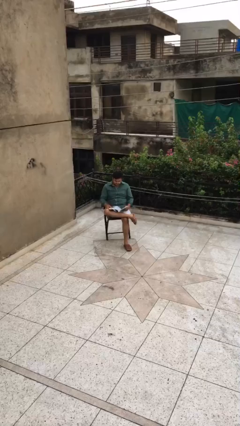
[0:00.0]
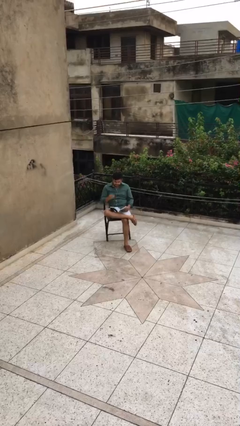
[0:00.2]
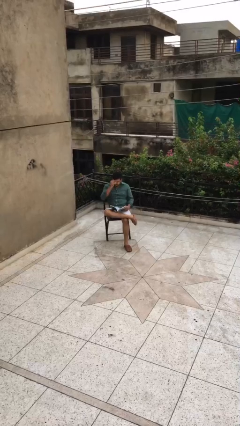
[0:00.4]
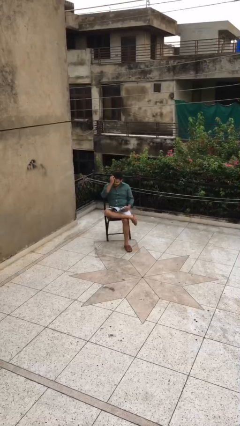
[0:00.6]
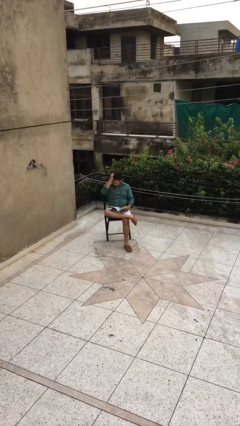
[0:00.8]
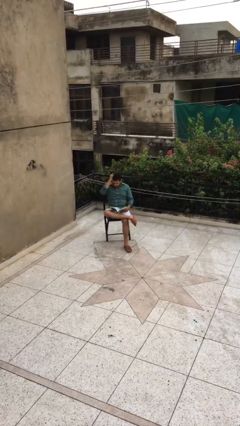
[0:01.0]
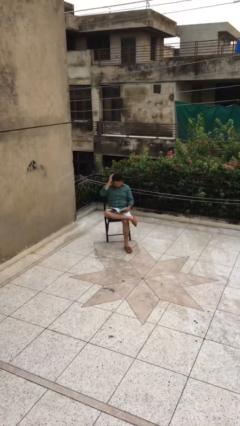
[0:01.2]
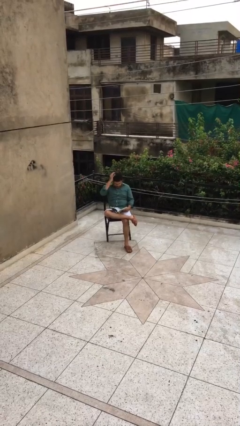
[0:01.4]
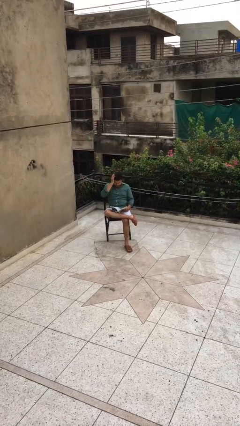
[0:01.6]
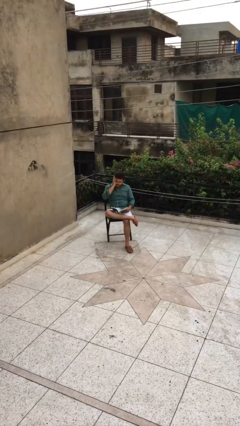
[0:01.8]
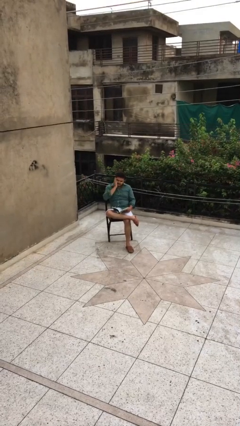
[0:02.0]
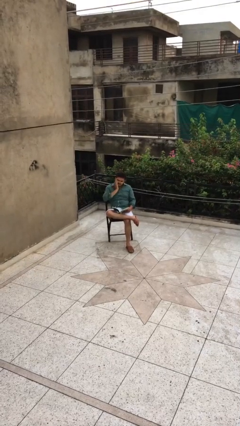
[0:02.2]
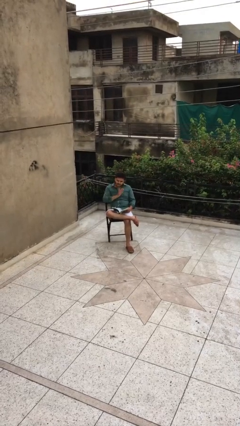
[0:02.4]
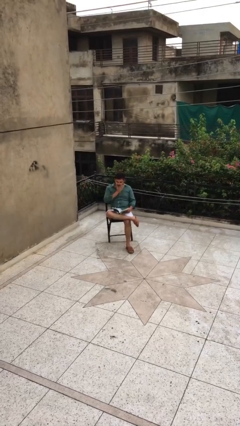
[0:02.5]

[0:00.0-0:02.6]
person reads document

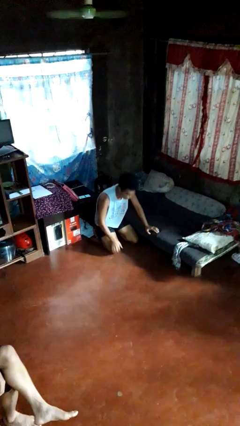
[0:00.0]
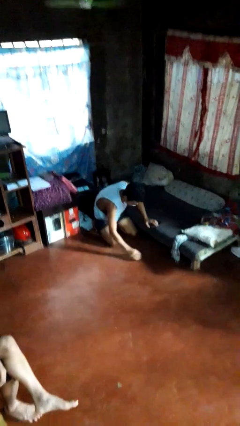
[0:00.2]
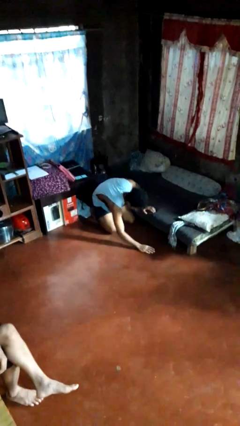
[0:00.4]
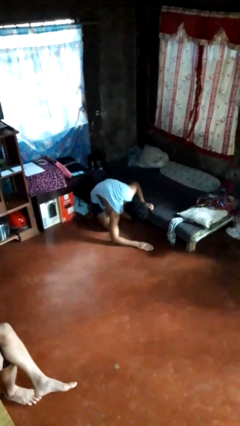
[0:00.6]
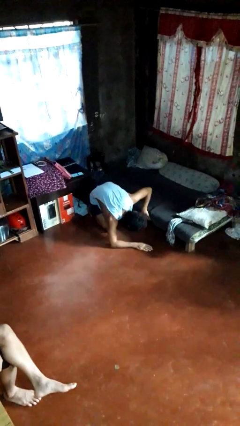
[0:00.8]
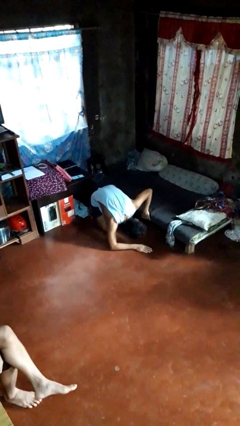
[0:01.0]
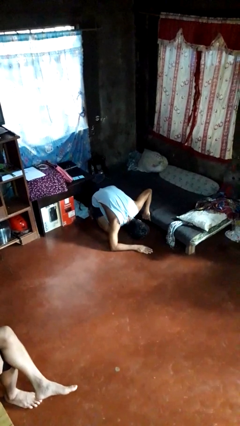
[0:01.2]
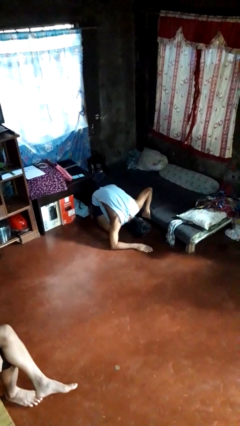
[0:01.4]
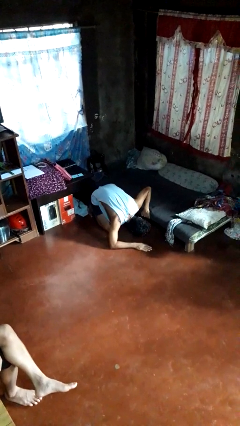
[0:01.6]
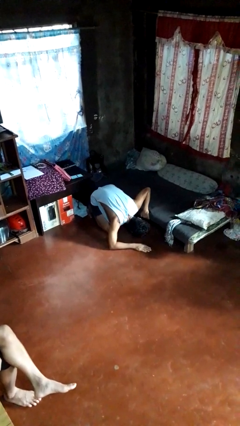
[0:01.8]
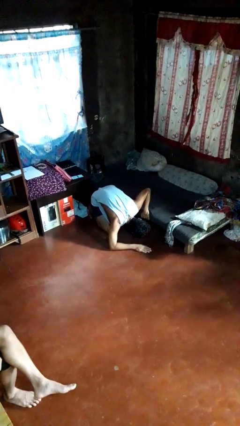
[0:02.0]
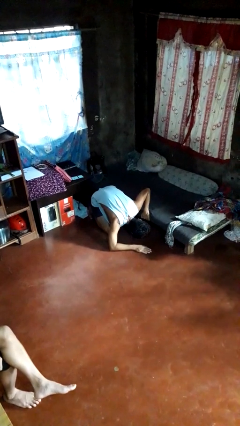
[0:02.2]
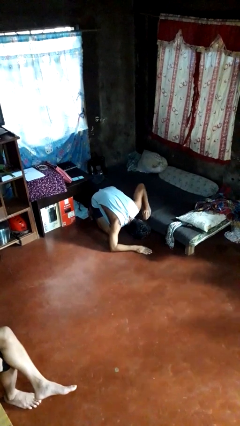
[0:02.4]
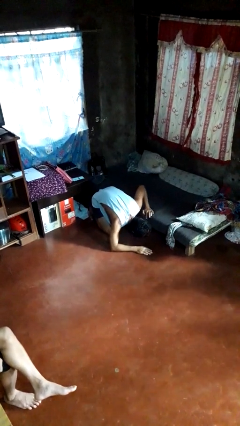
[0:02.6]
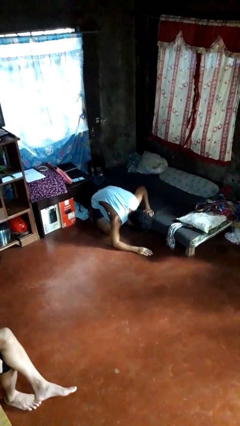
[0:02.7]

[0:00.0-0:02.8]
person searches under bed

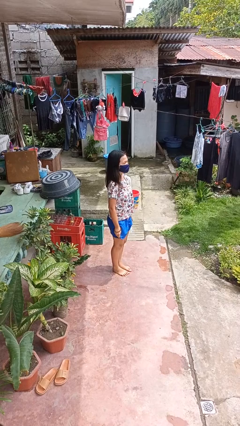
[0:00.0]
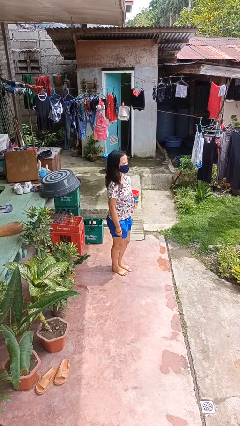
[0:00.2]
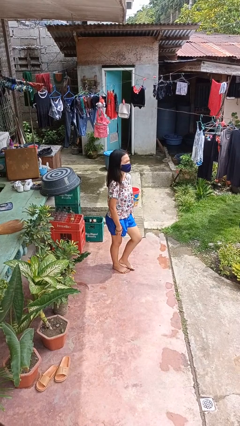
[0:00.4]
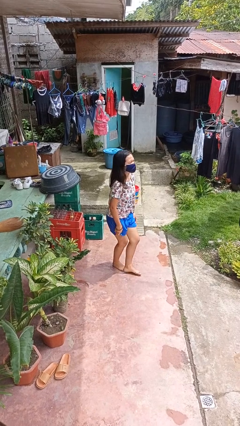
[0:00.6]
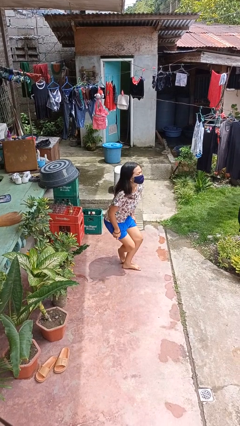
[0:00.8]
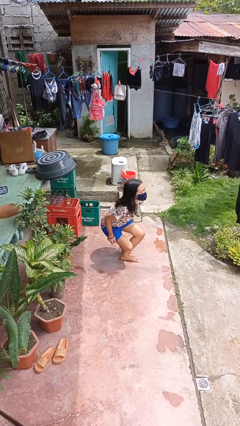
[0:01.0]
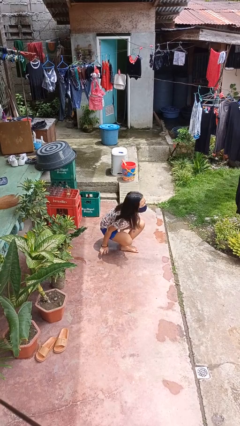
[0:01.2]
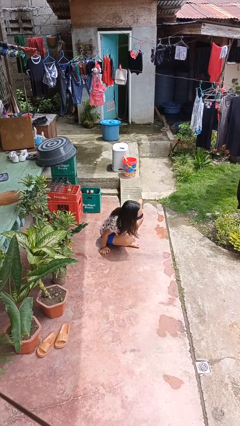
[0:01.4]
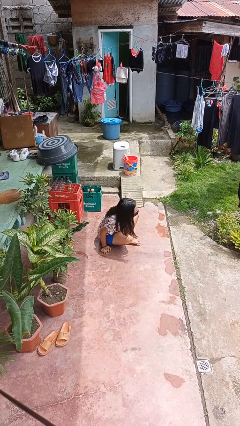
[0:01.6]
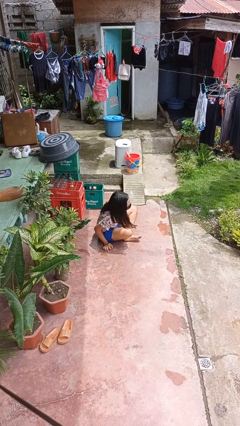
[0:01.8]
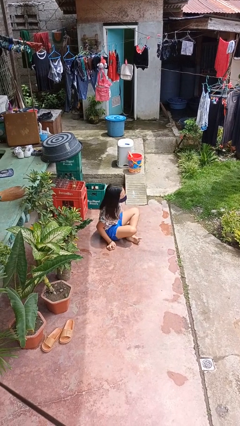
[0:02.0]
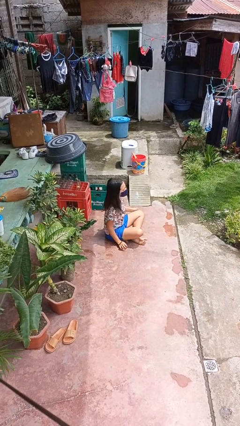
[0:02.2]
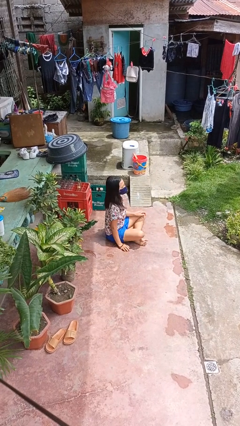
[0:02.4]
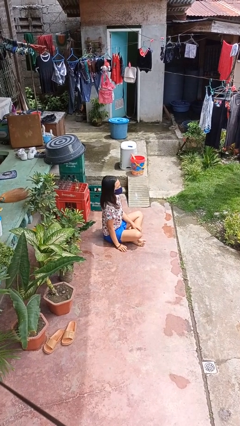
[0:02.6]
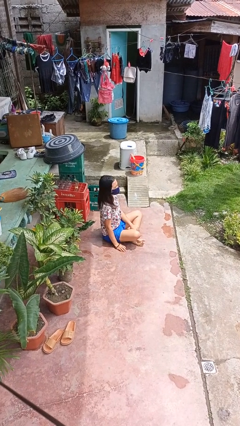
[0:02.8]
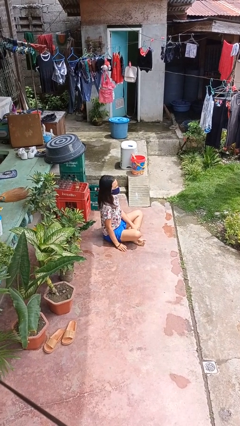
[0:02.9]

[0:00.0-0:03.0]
person sits crisscross

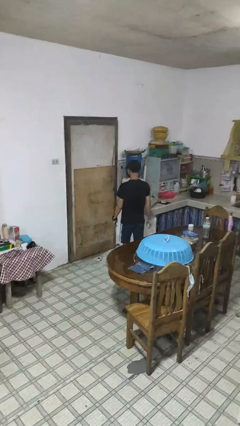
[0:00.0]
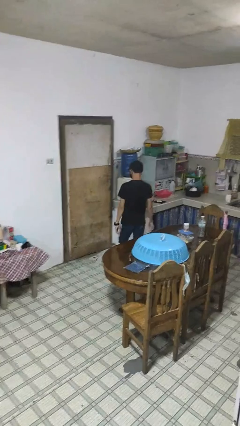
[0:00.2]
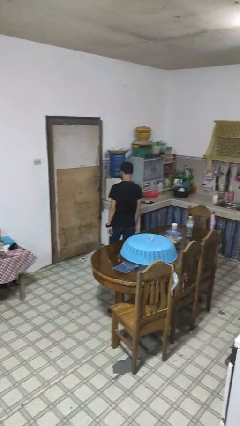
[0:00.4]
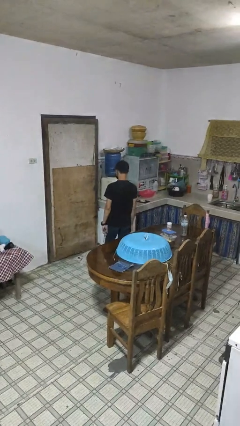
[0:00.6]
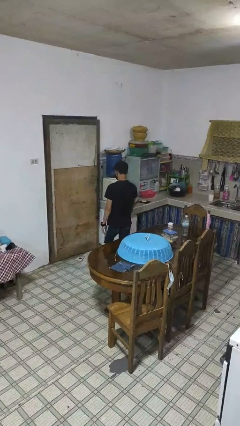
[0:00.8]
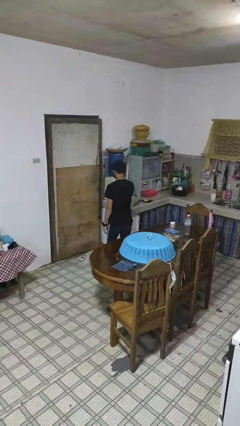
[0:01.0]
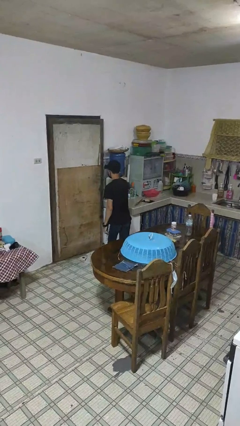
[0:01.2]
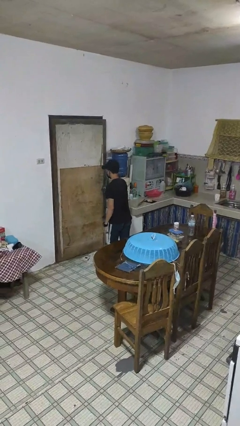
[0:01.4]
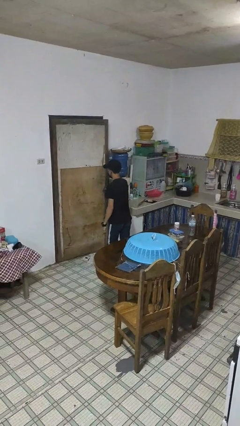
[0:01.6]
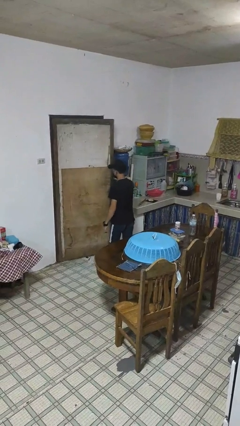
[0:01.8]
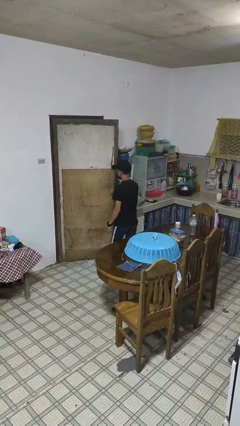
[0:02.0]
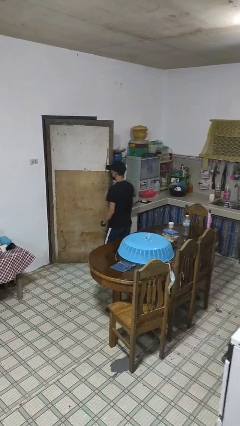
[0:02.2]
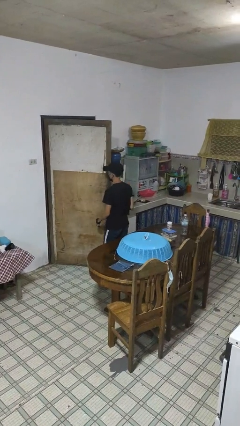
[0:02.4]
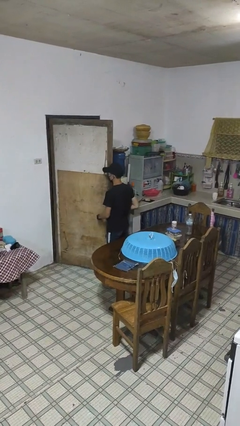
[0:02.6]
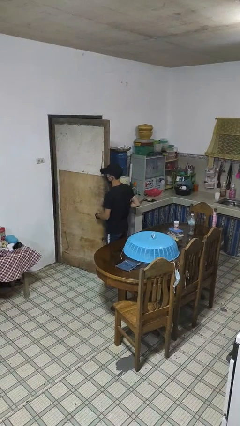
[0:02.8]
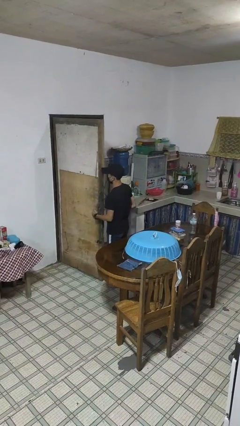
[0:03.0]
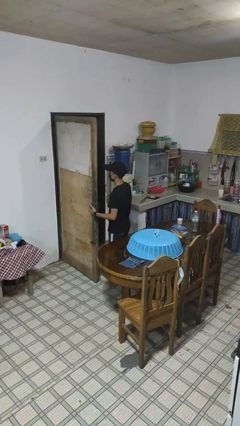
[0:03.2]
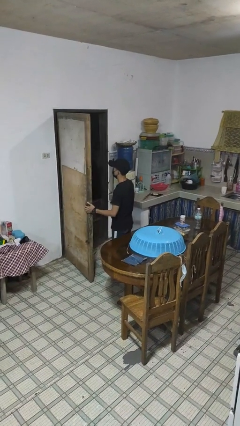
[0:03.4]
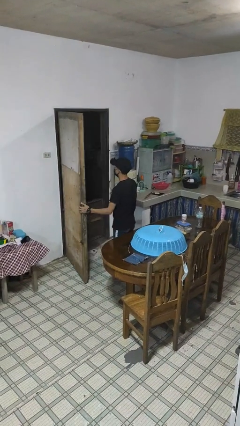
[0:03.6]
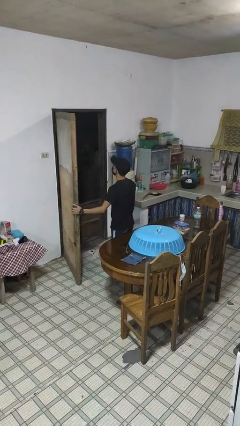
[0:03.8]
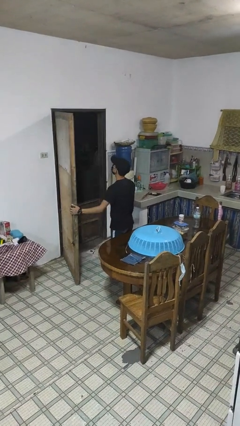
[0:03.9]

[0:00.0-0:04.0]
person opens facility door

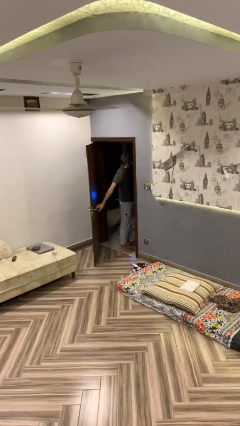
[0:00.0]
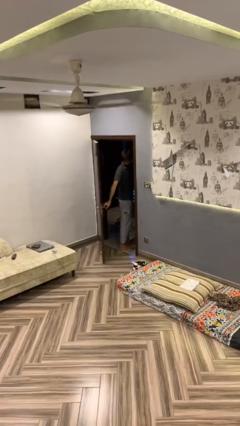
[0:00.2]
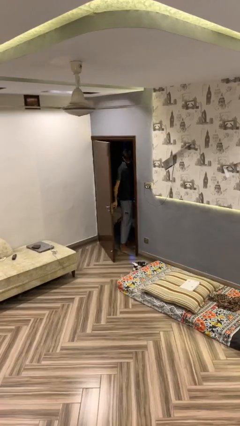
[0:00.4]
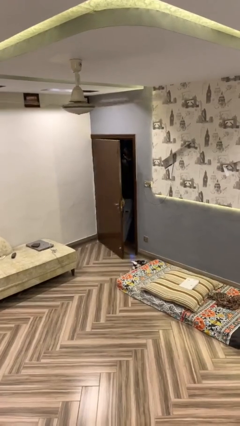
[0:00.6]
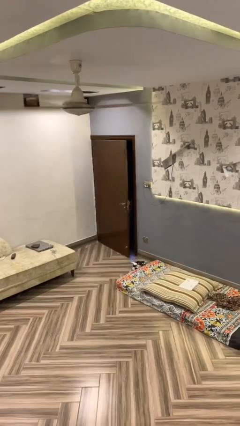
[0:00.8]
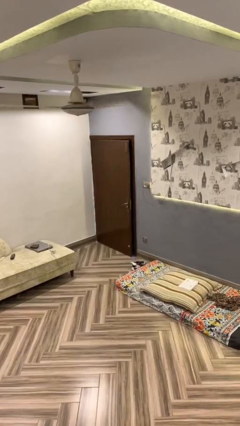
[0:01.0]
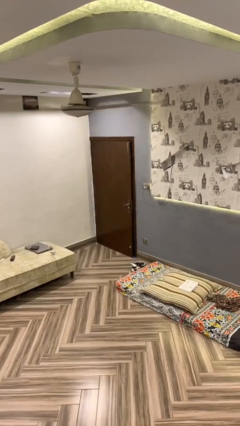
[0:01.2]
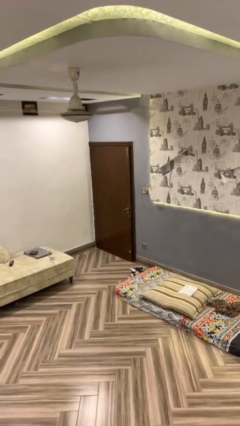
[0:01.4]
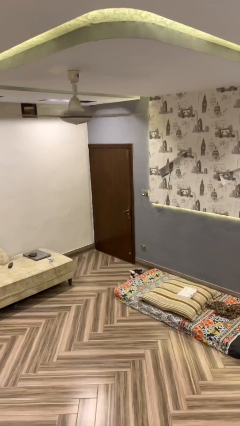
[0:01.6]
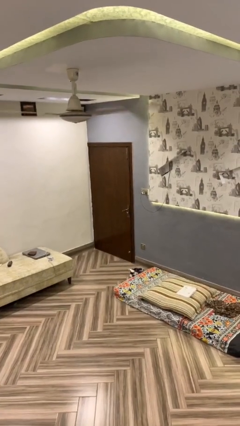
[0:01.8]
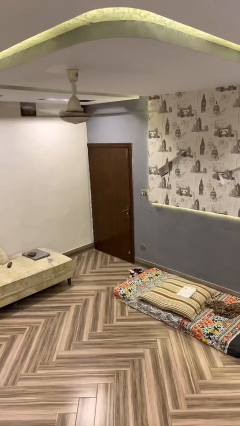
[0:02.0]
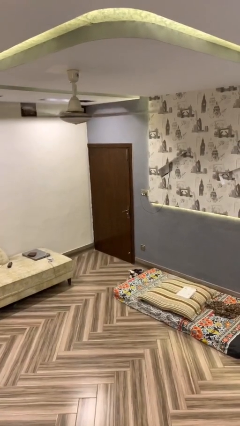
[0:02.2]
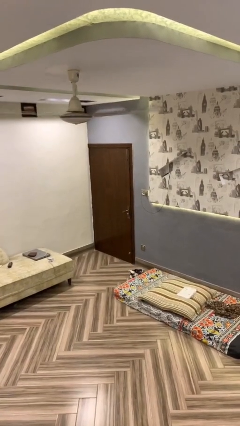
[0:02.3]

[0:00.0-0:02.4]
person closes facility door

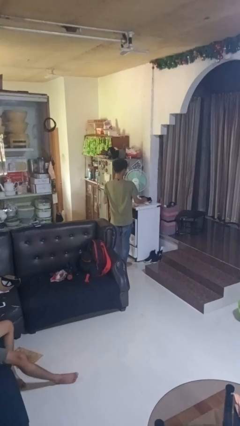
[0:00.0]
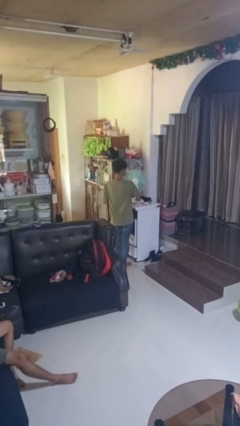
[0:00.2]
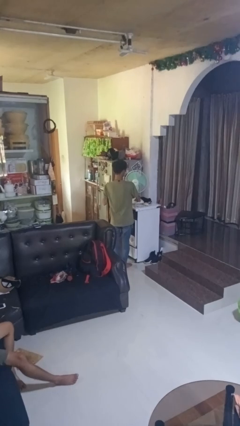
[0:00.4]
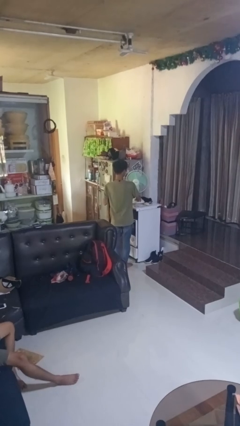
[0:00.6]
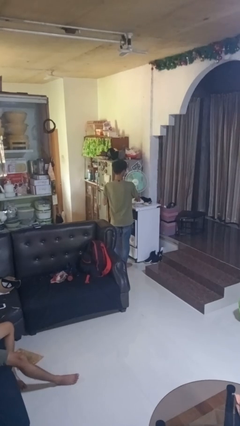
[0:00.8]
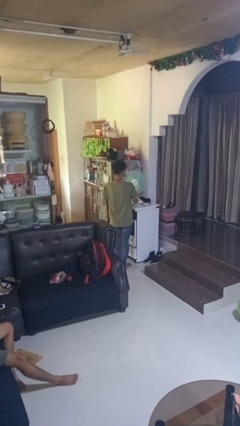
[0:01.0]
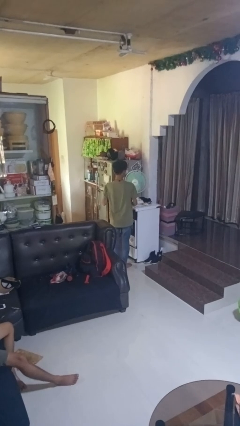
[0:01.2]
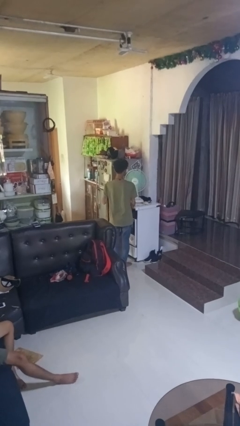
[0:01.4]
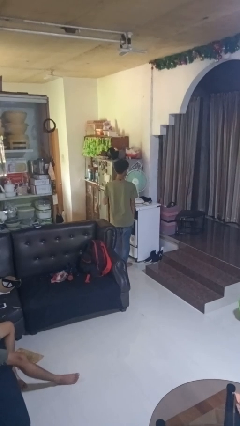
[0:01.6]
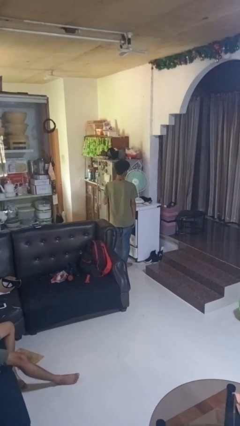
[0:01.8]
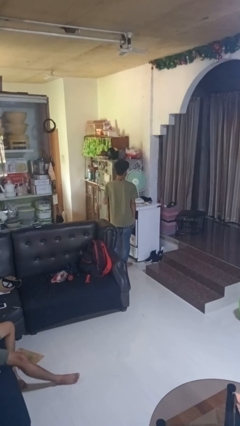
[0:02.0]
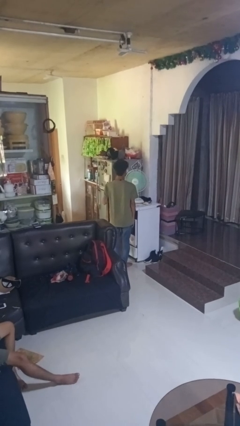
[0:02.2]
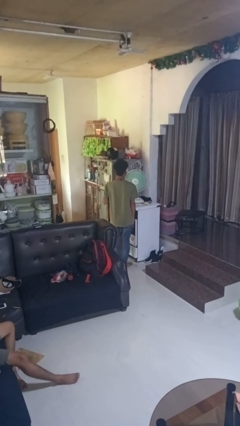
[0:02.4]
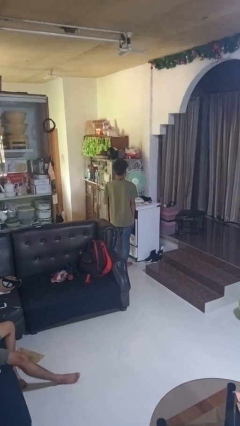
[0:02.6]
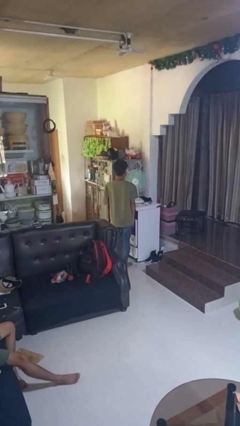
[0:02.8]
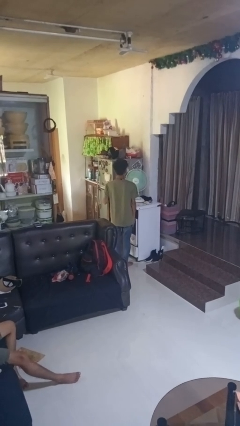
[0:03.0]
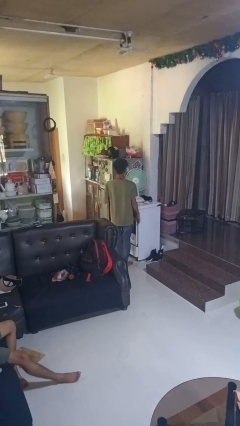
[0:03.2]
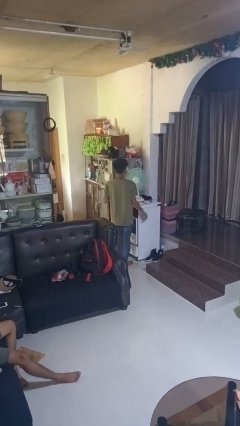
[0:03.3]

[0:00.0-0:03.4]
person turns on fan
